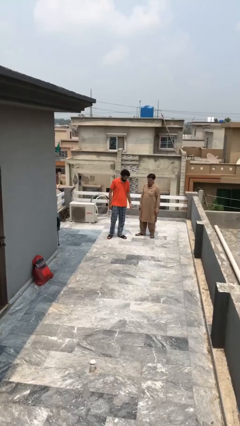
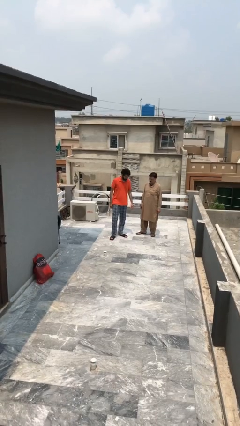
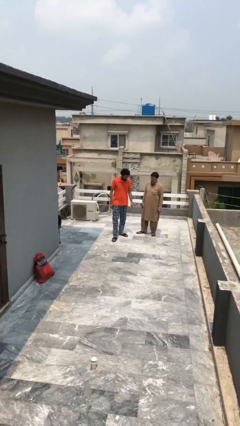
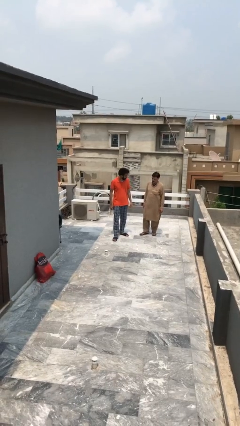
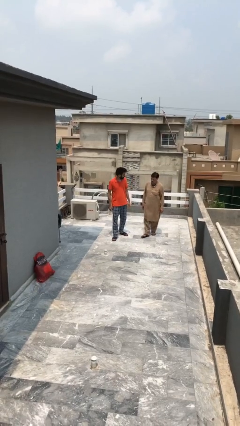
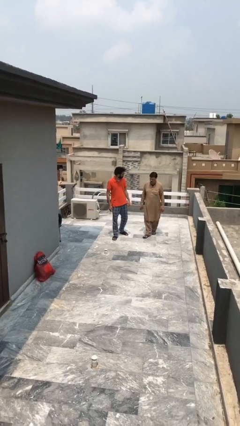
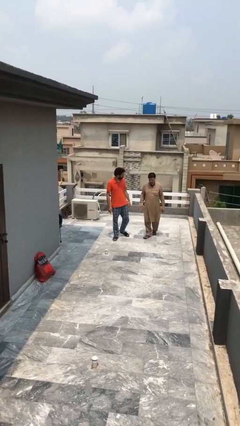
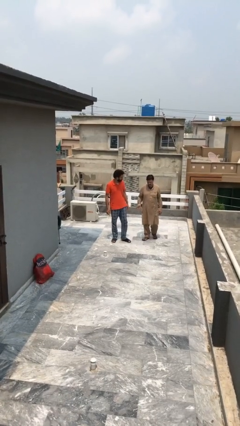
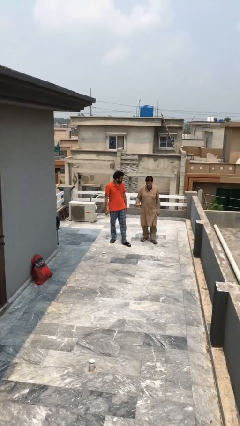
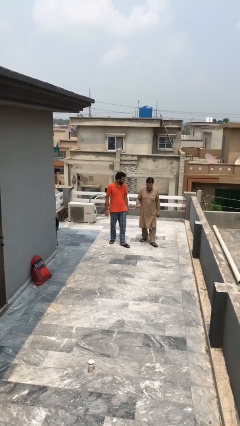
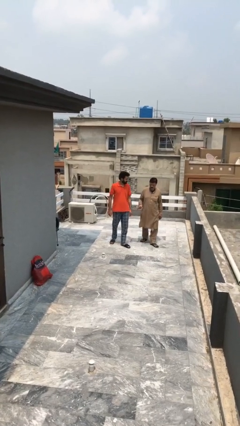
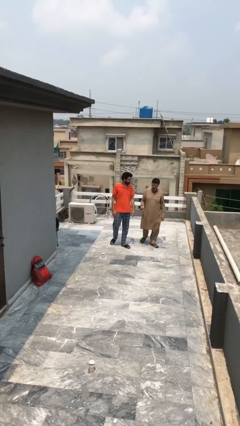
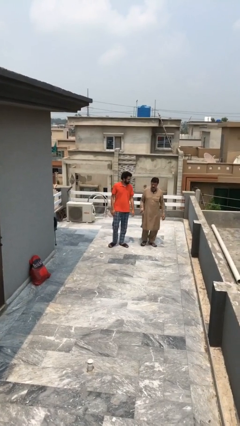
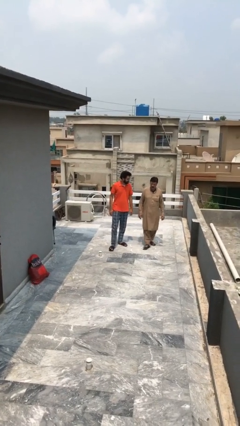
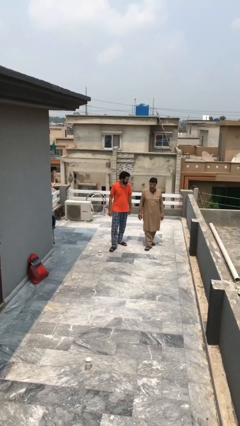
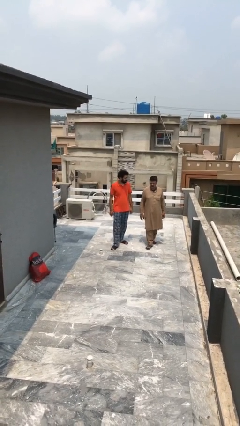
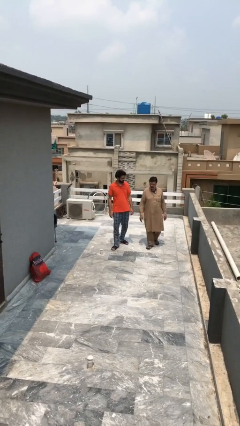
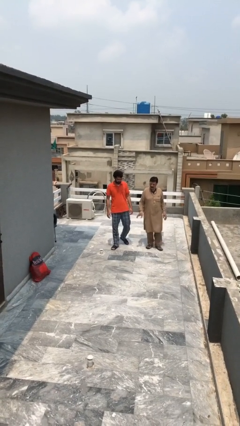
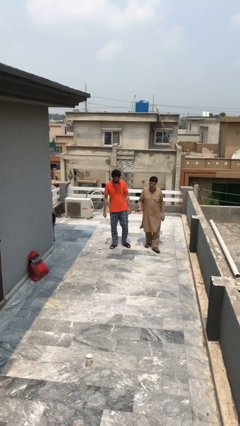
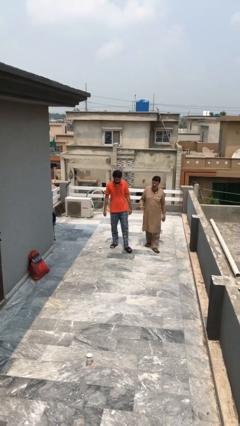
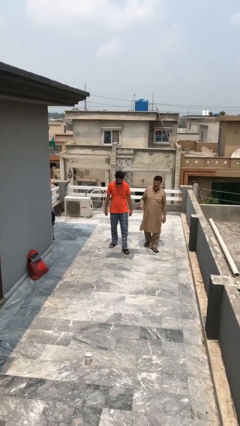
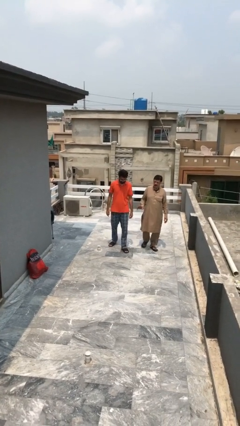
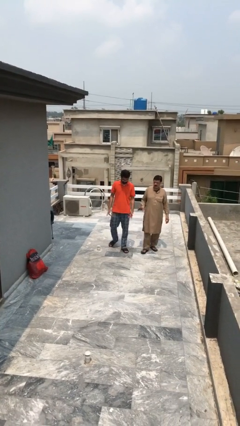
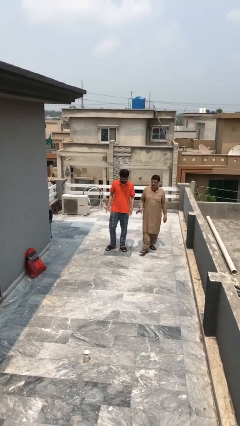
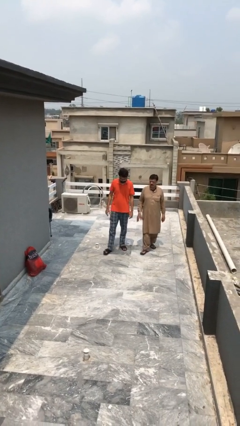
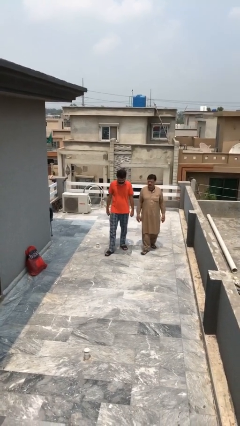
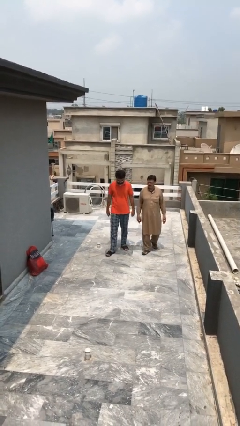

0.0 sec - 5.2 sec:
person talks to person

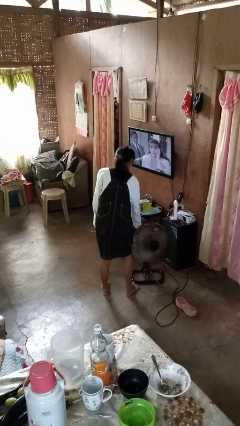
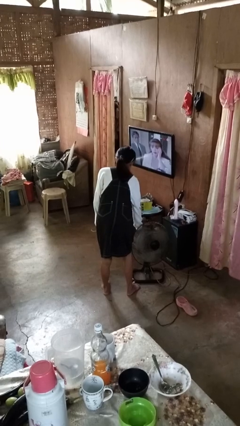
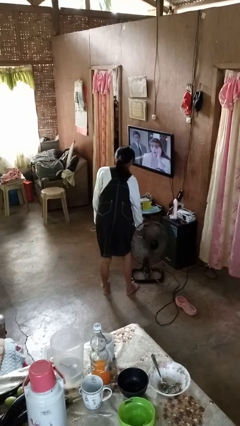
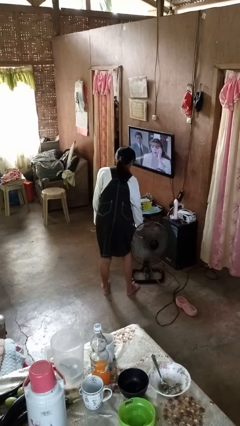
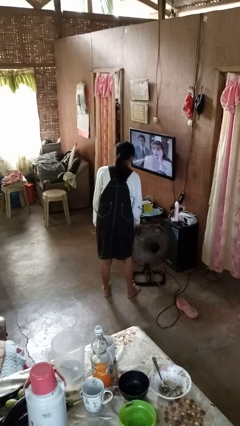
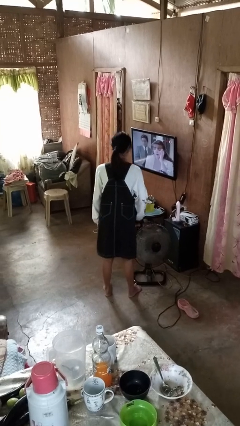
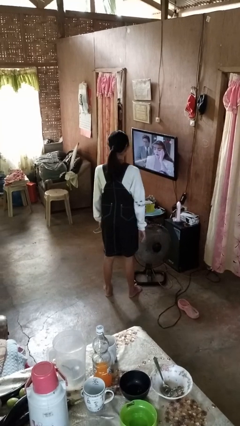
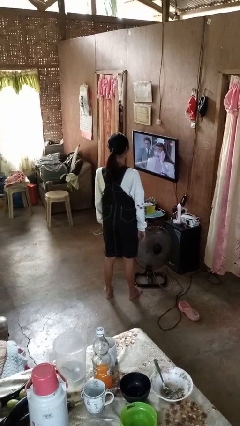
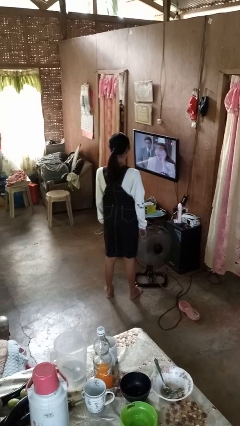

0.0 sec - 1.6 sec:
person turns on fan

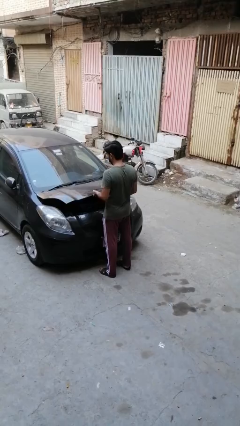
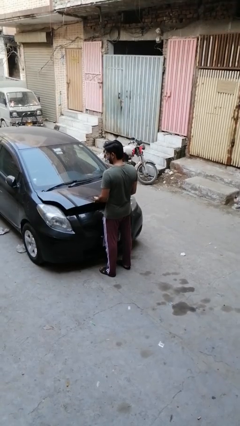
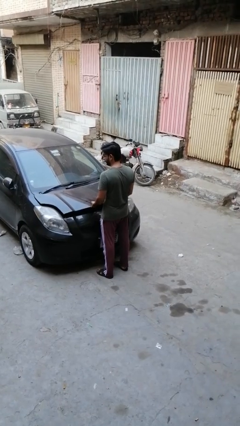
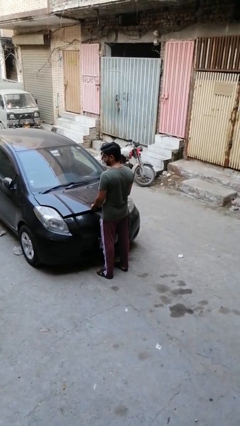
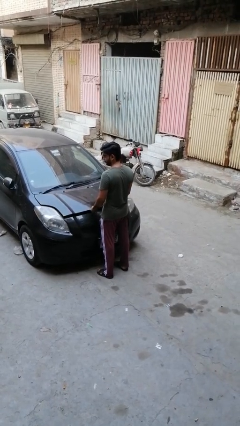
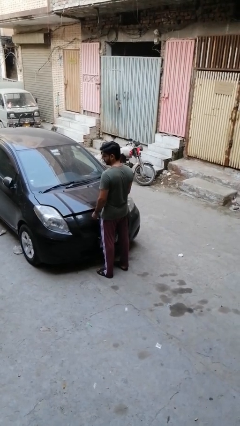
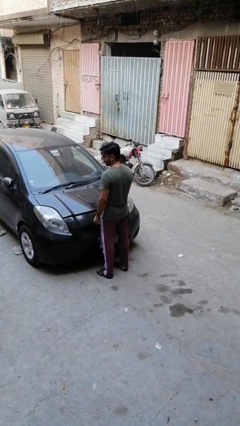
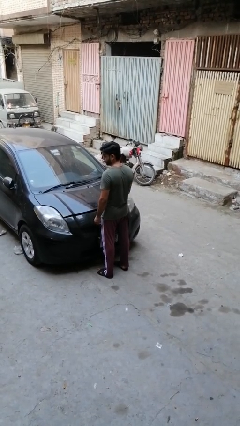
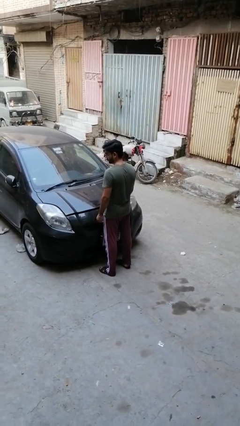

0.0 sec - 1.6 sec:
person closes car hood

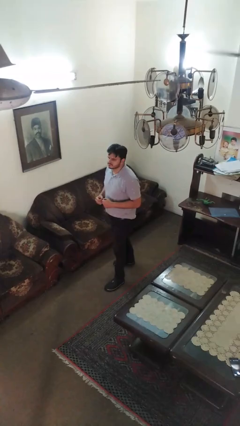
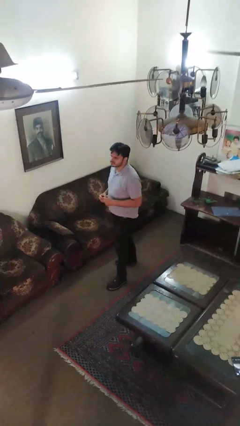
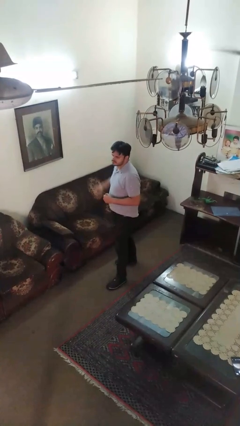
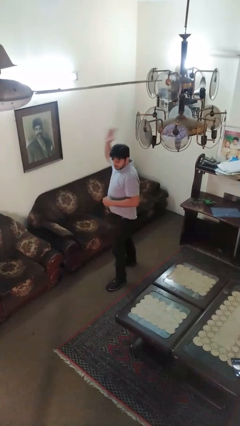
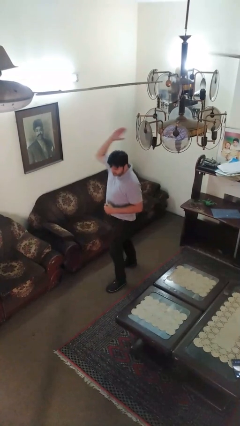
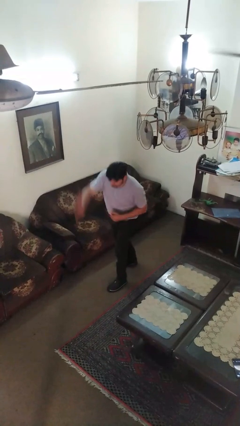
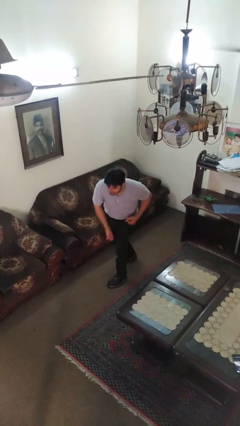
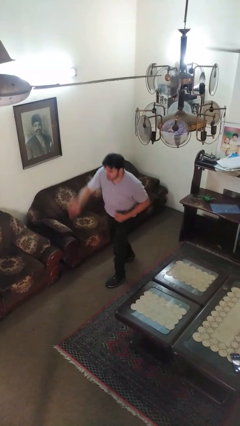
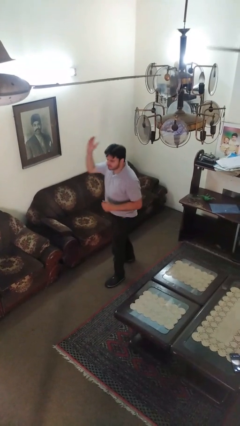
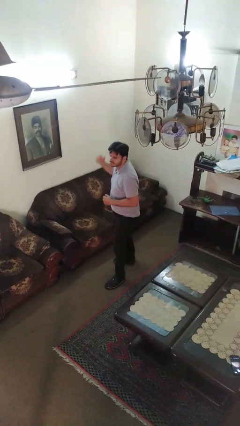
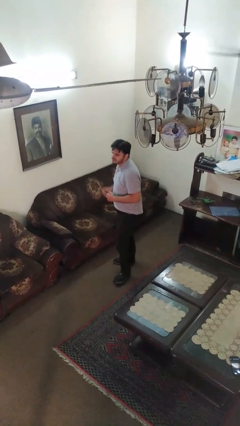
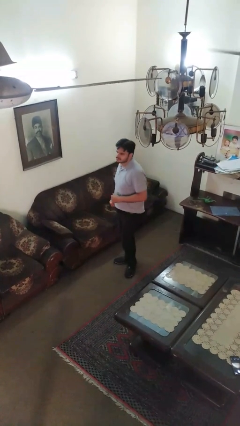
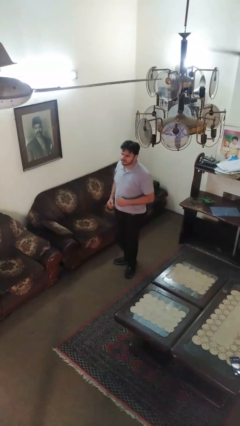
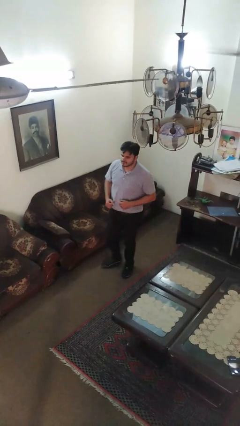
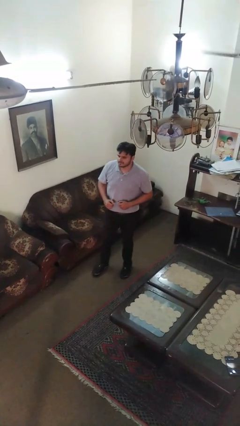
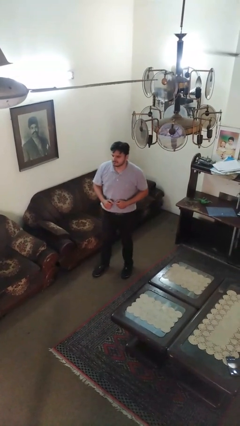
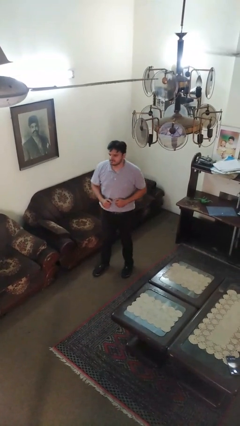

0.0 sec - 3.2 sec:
person karate chop

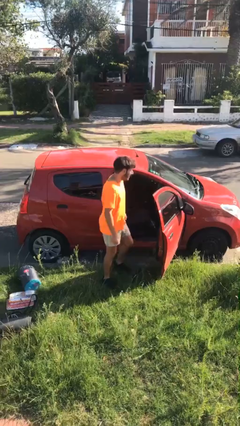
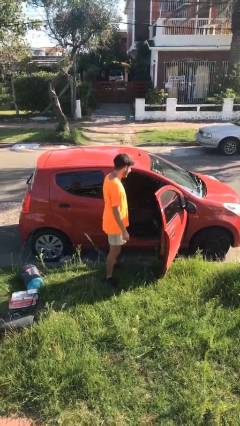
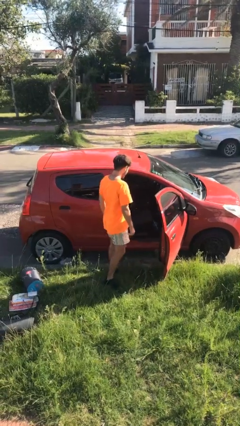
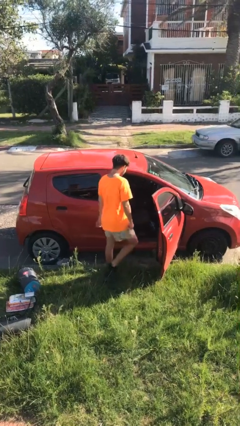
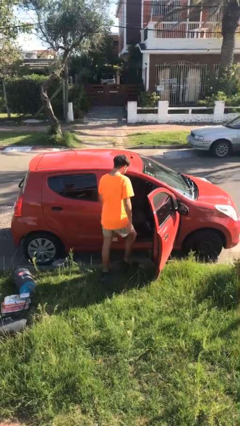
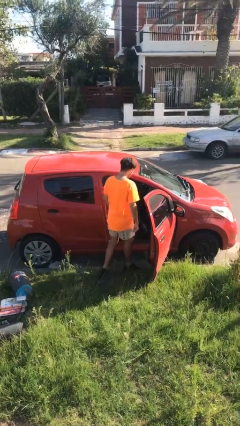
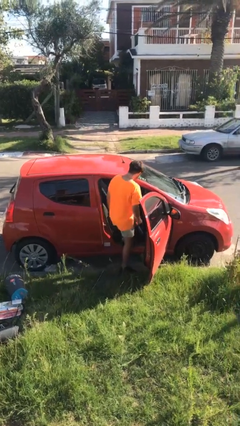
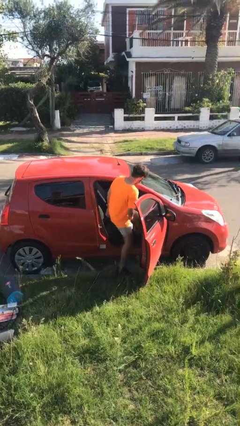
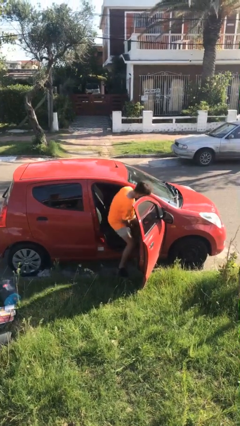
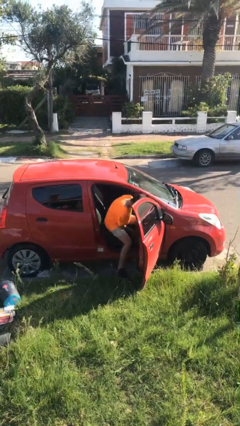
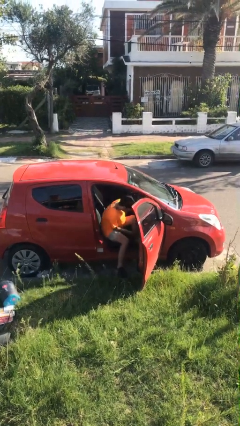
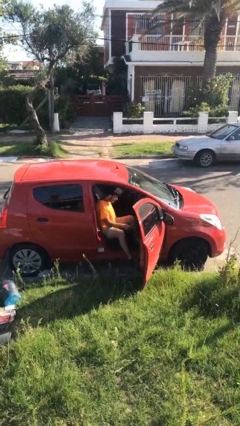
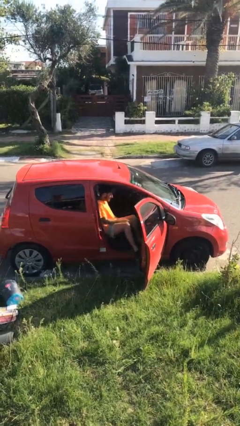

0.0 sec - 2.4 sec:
person enters car

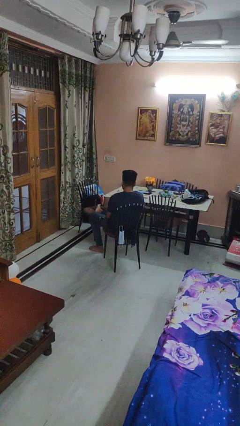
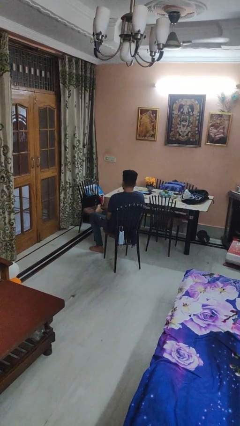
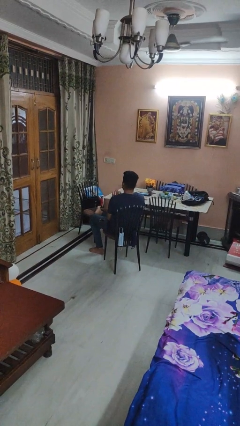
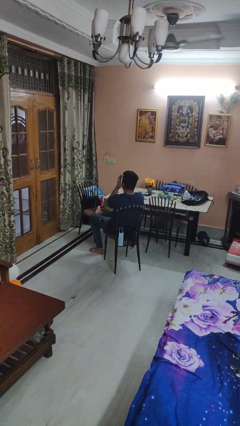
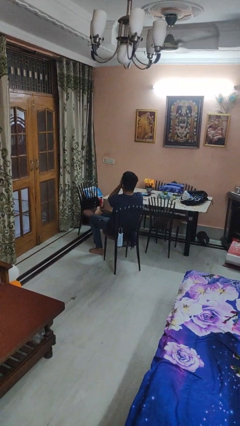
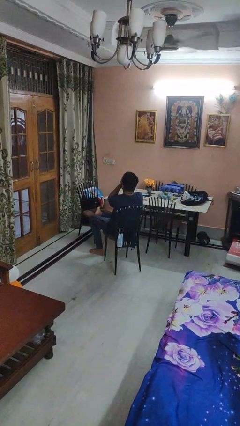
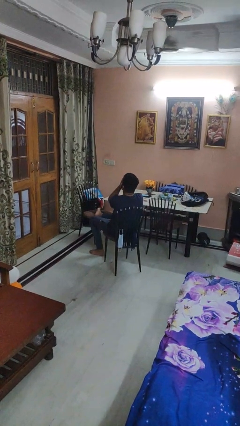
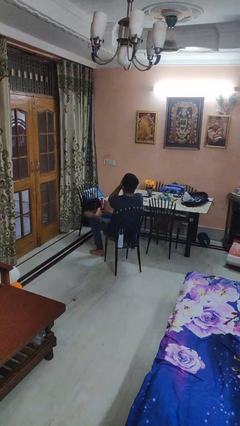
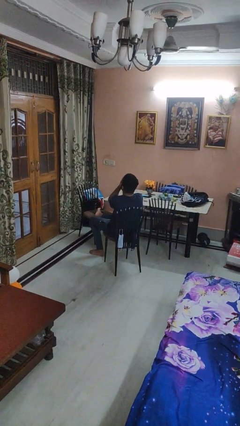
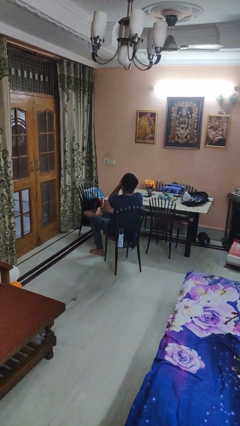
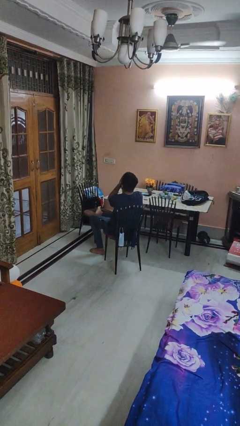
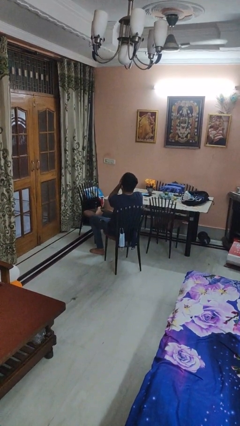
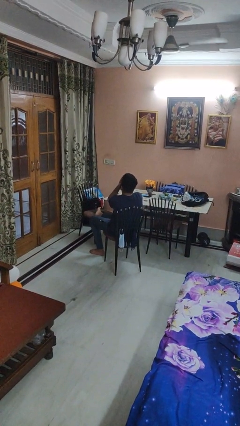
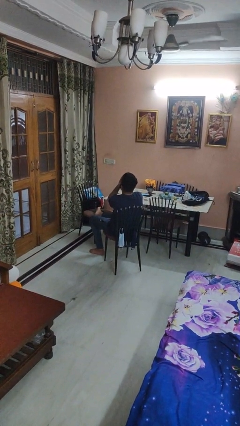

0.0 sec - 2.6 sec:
person covers face with hands

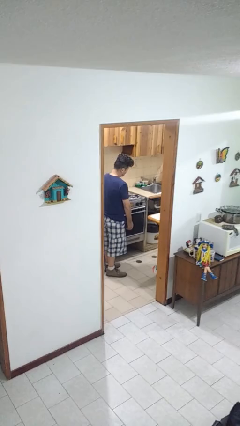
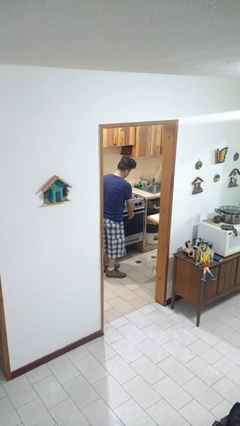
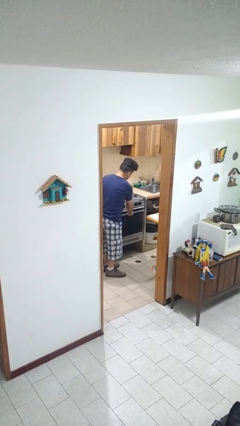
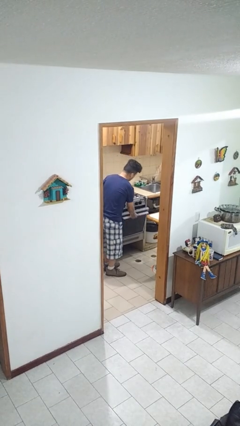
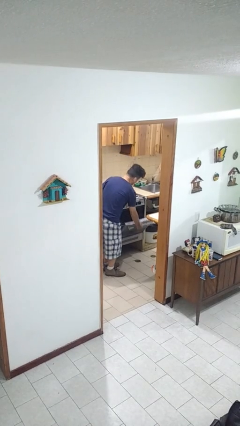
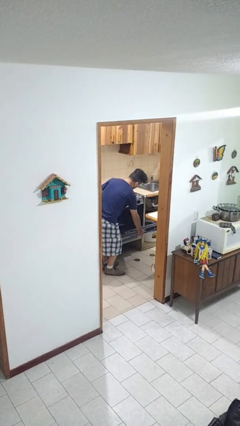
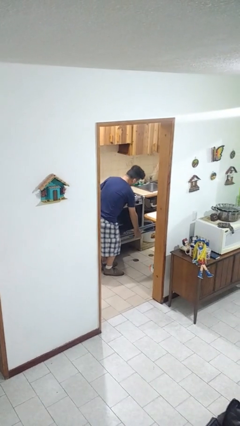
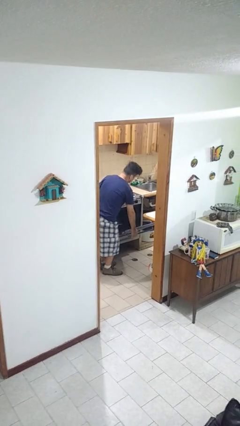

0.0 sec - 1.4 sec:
person opens oven door
